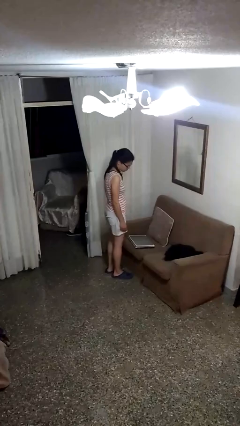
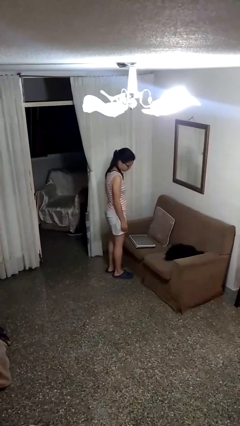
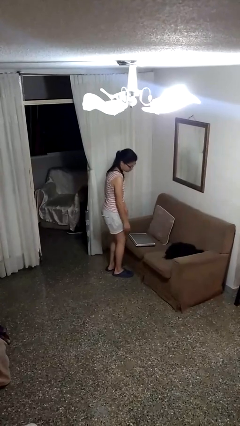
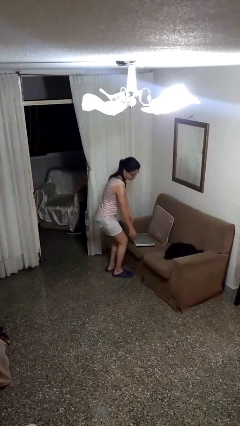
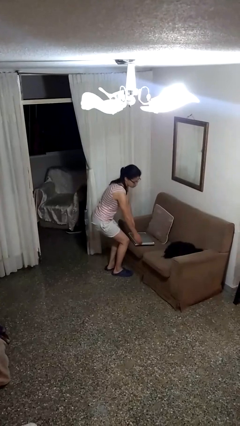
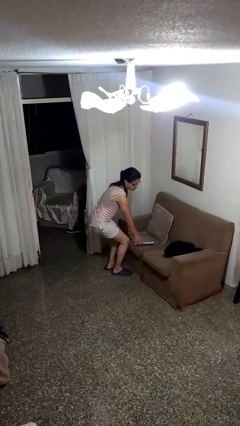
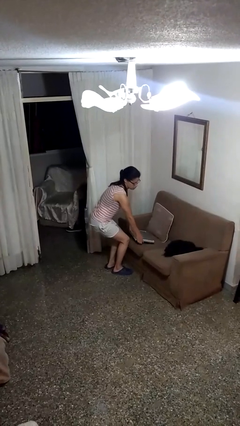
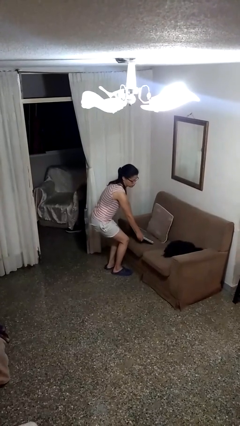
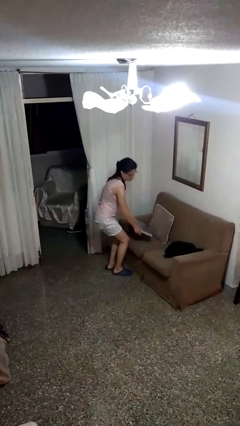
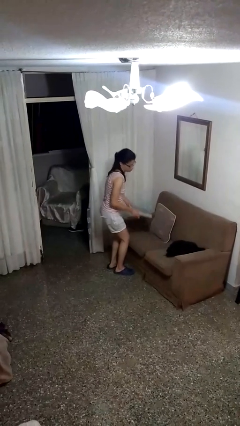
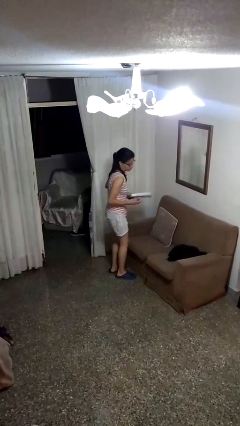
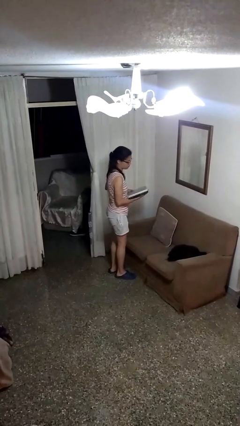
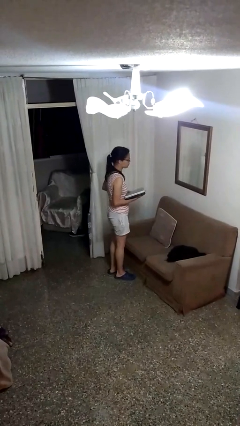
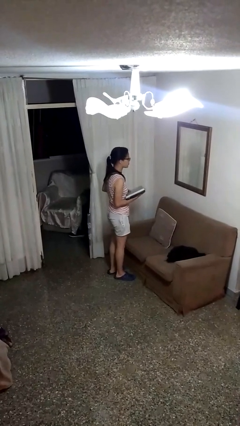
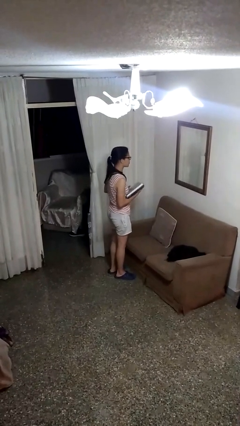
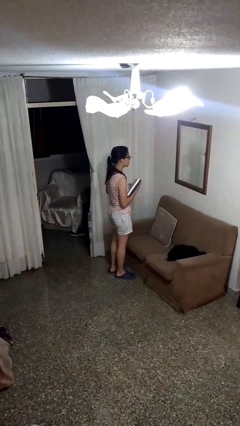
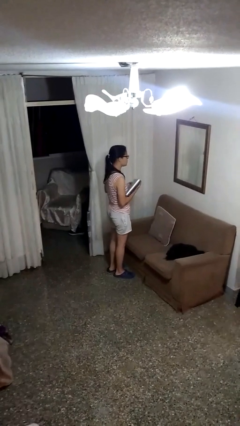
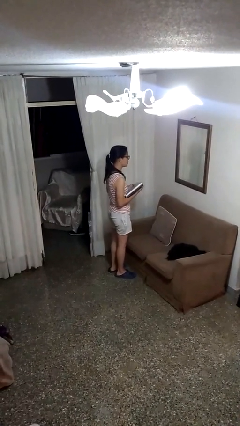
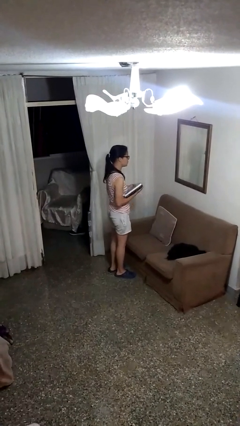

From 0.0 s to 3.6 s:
person picks up object from couch

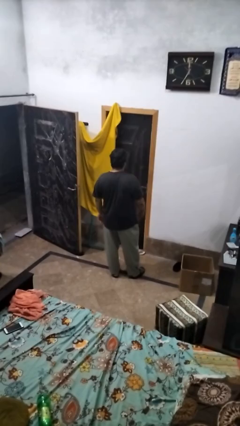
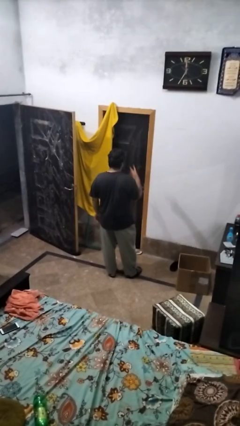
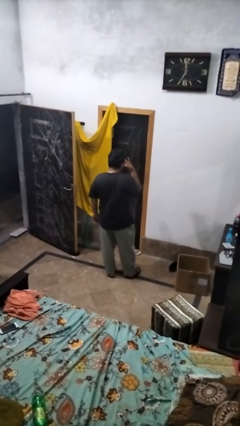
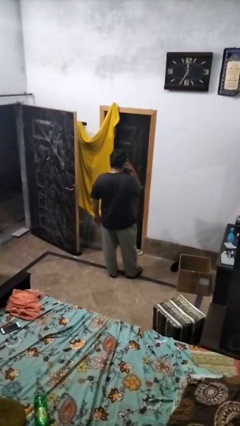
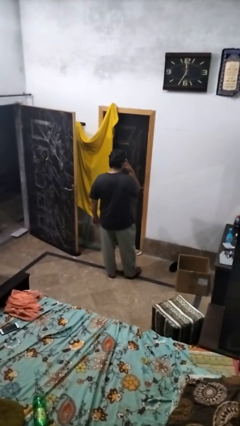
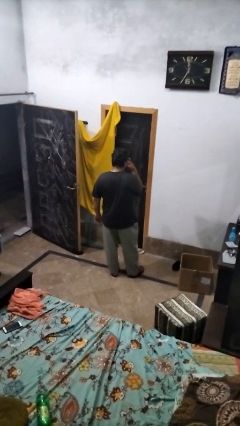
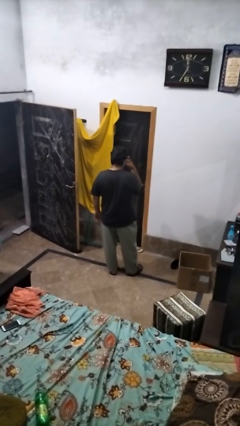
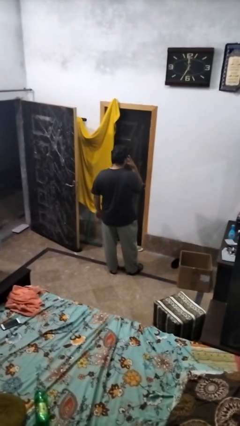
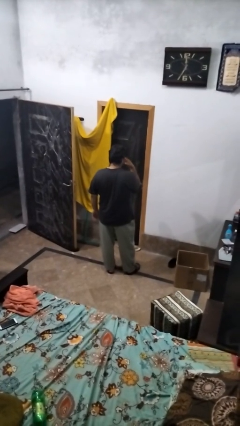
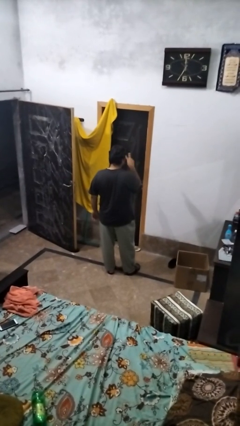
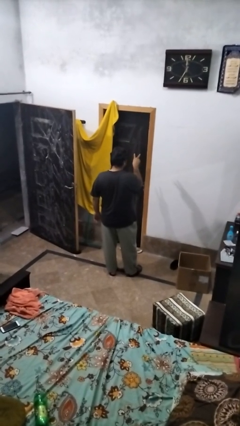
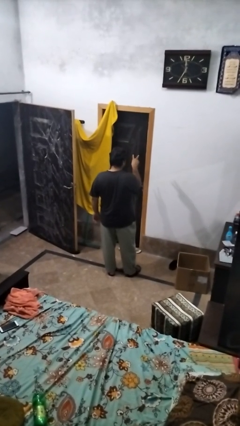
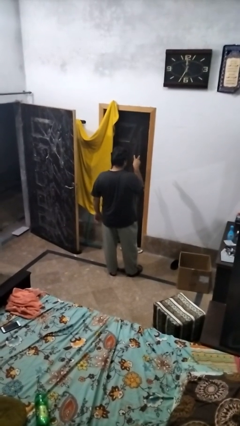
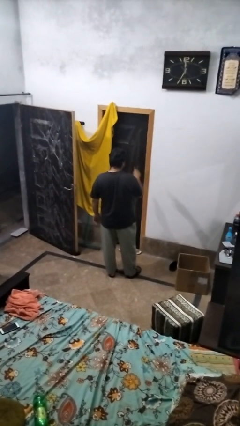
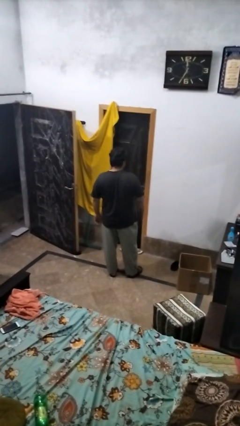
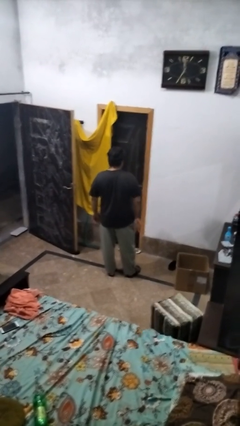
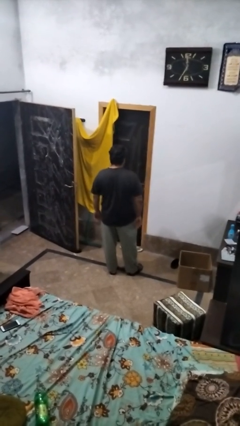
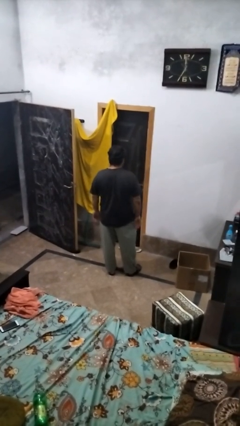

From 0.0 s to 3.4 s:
person gestures watch closely

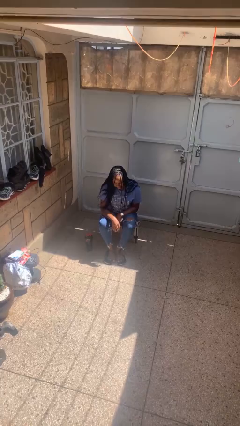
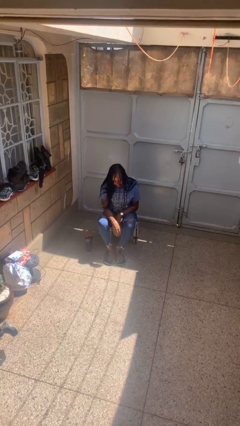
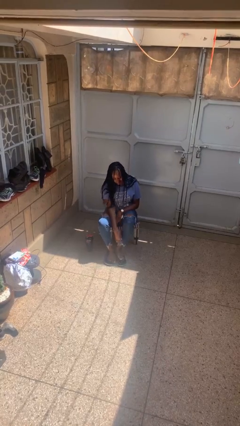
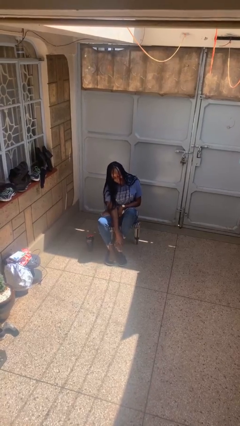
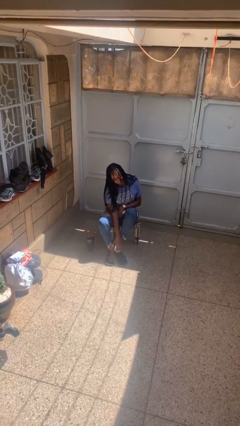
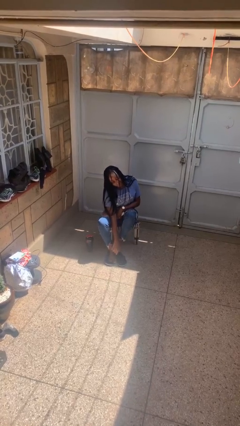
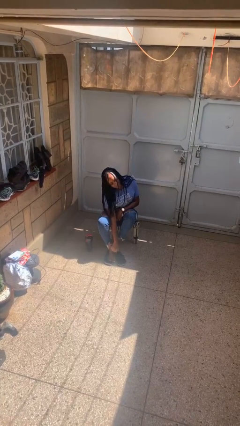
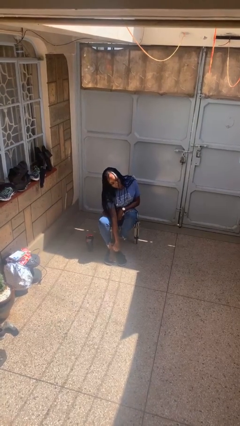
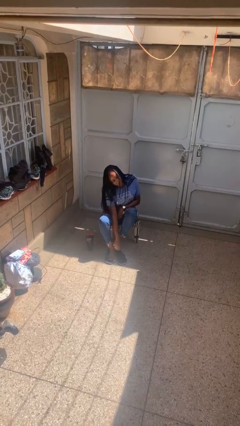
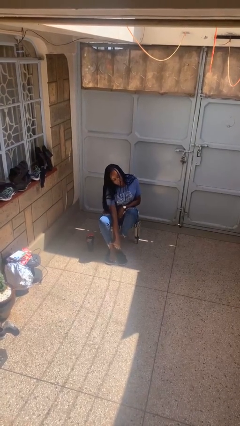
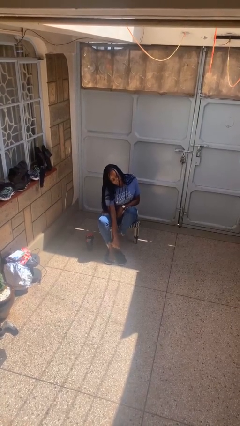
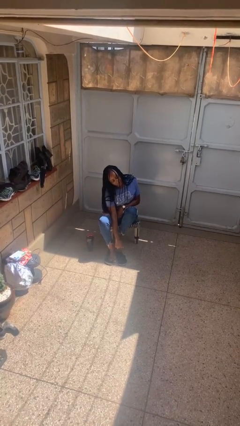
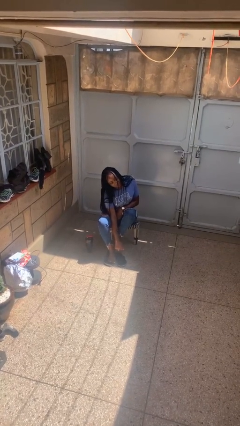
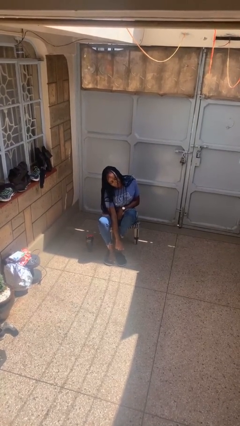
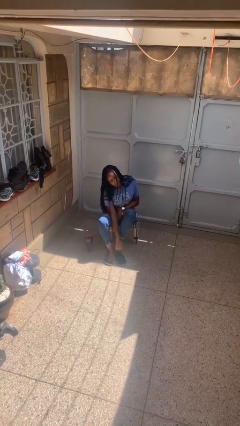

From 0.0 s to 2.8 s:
person rubs foot

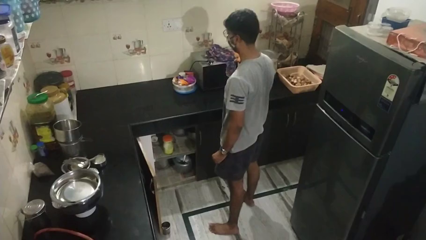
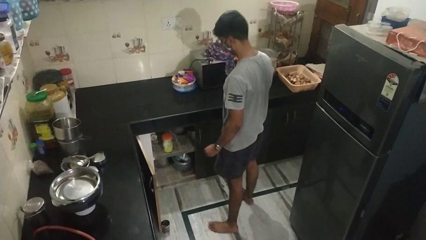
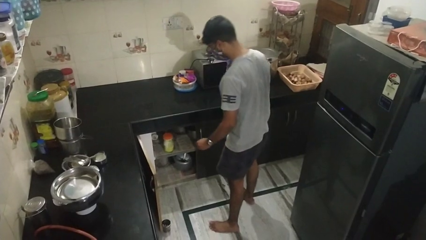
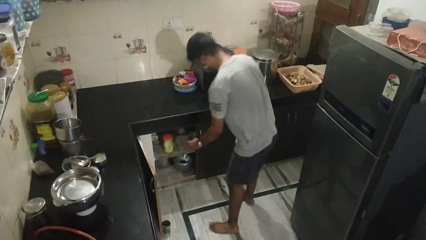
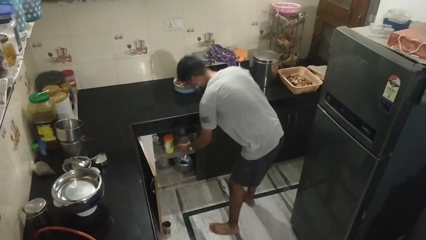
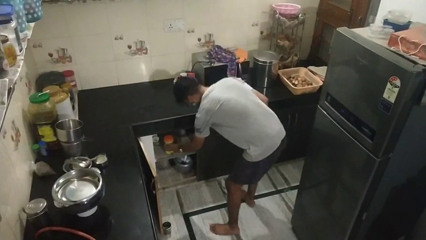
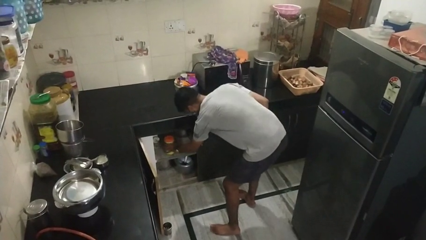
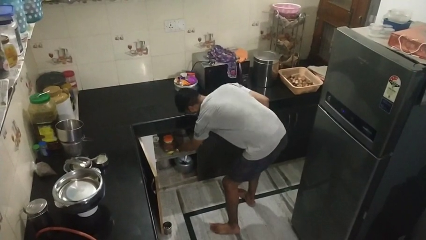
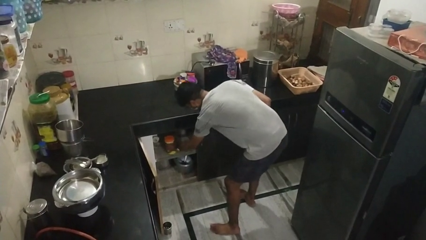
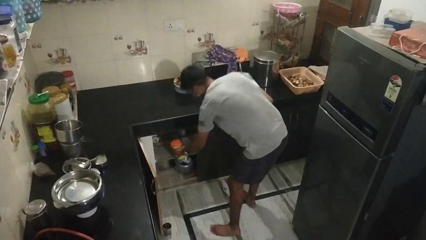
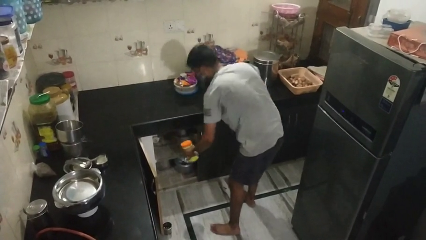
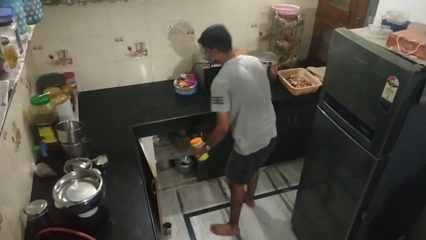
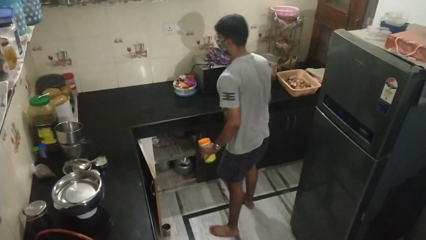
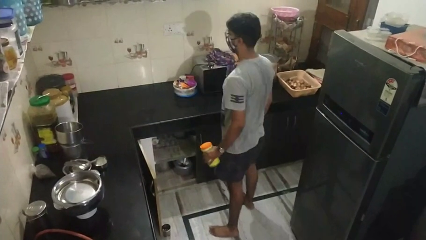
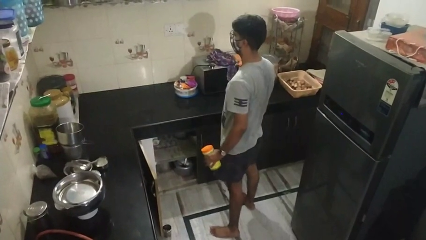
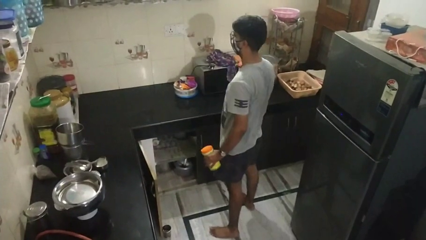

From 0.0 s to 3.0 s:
person picks up object from cabinet

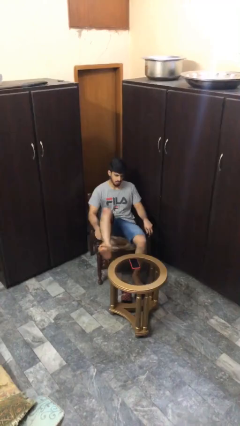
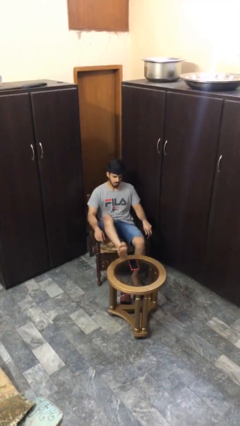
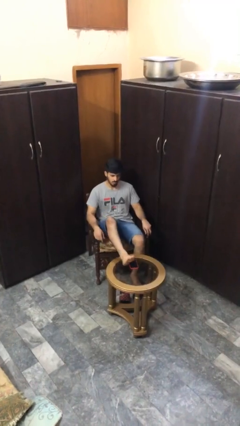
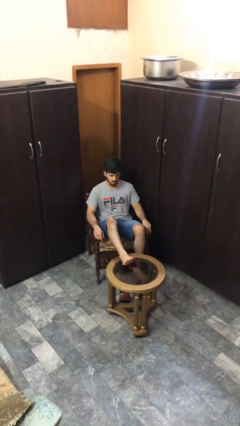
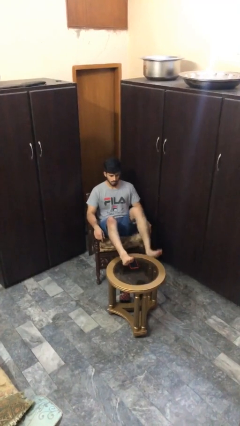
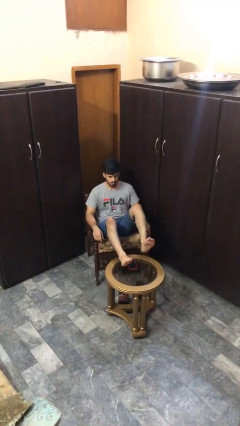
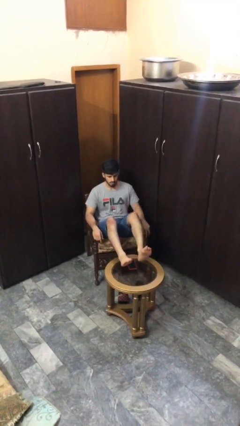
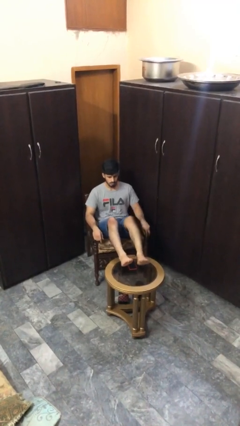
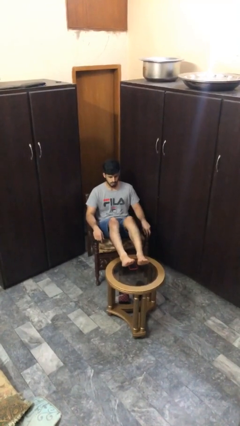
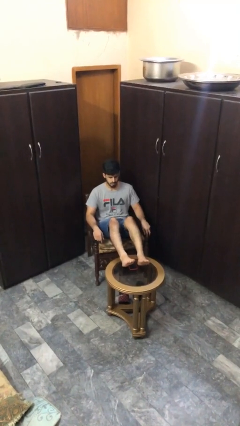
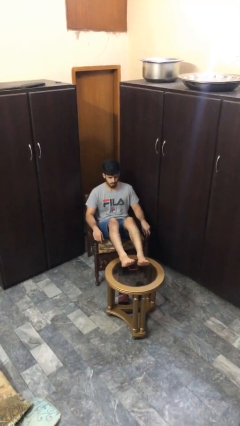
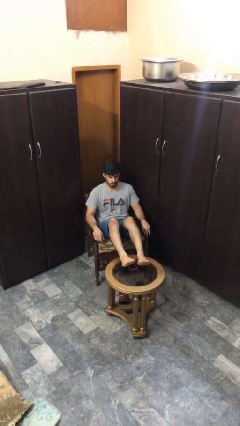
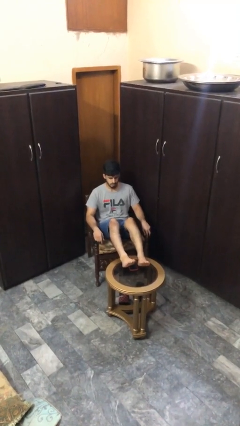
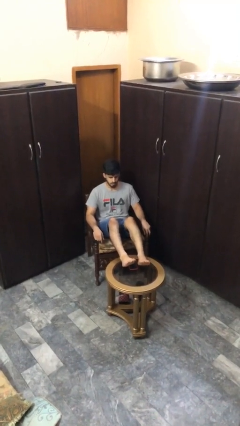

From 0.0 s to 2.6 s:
person puts feet up

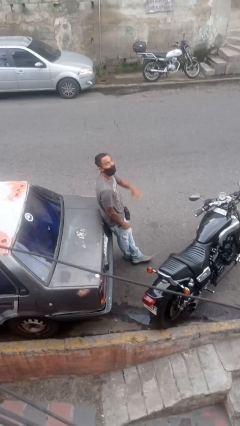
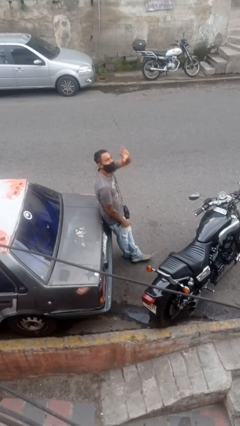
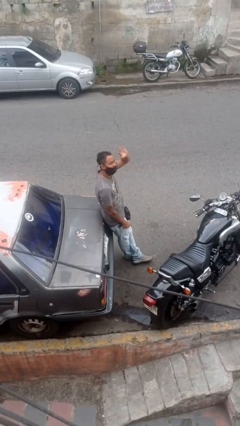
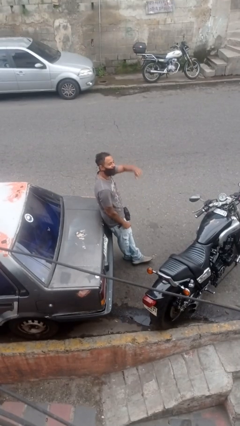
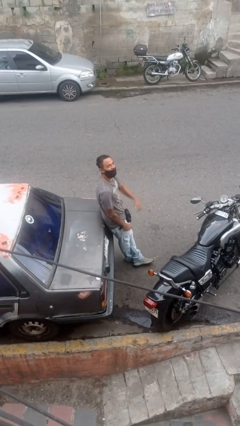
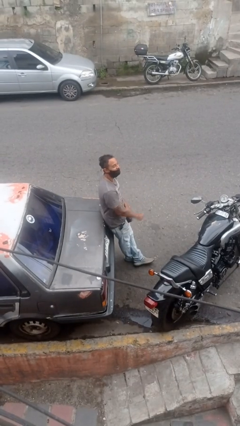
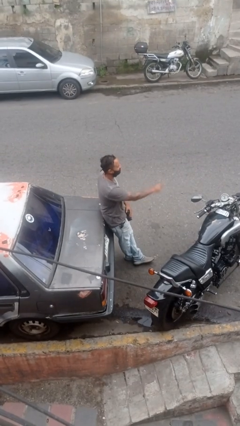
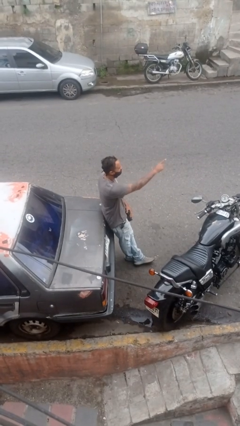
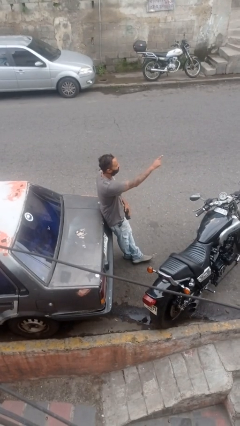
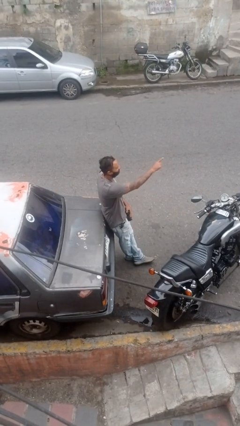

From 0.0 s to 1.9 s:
person points at person
